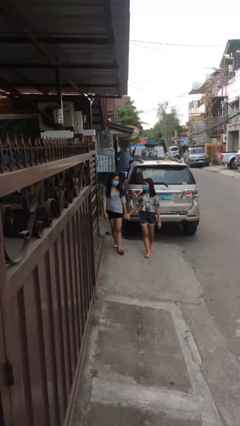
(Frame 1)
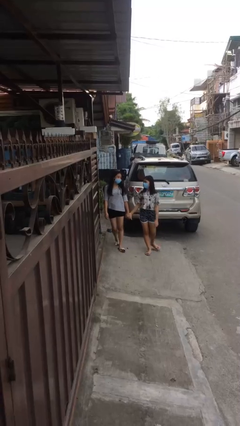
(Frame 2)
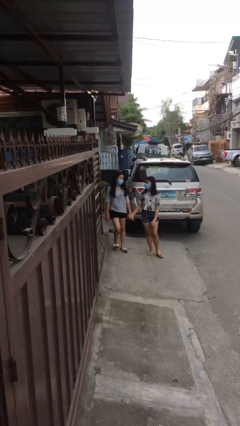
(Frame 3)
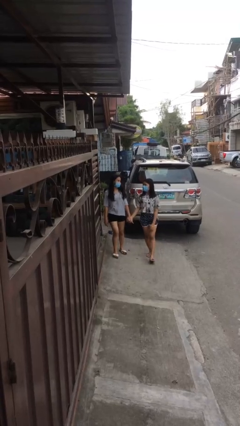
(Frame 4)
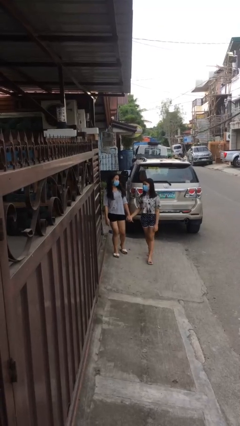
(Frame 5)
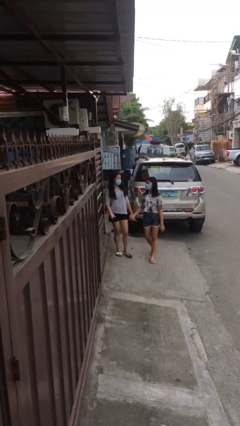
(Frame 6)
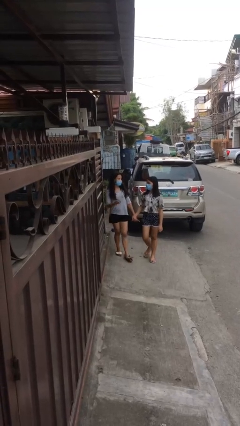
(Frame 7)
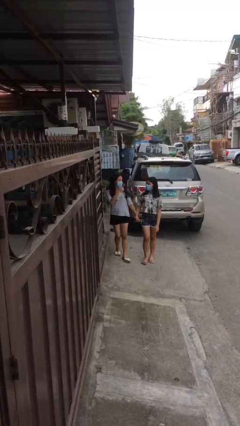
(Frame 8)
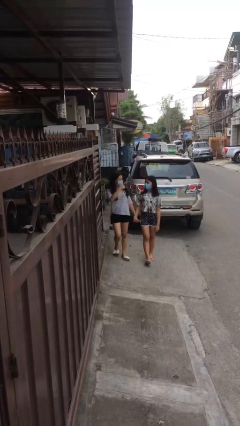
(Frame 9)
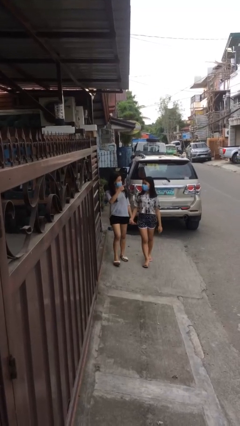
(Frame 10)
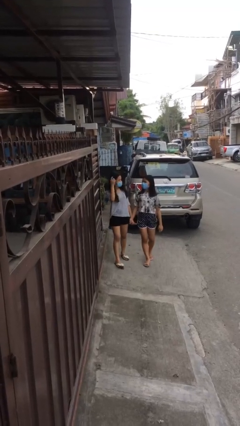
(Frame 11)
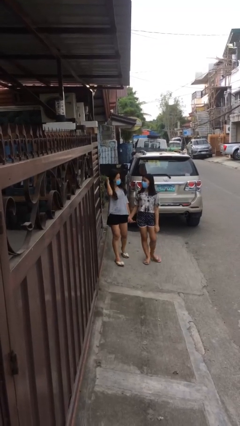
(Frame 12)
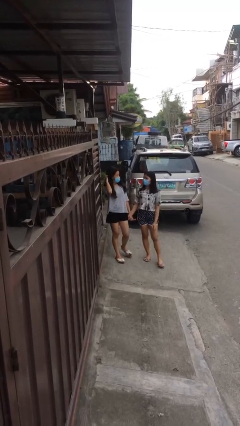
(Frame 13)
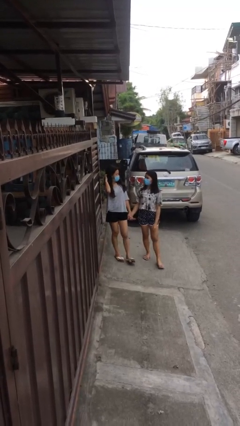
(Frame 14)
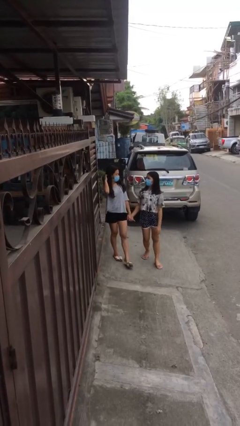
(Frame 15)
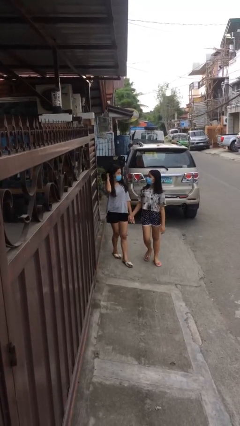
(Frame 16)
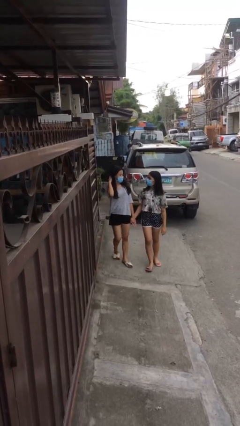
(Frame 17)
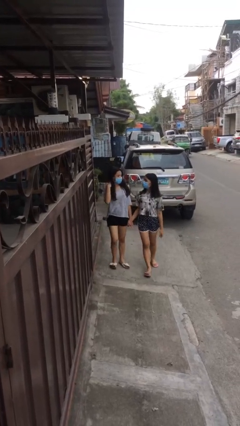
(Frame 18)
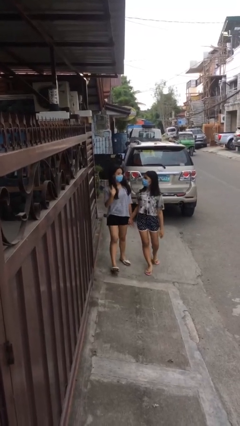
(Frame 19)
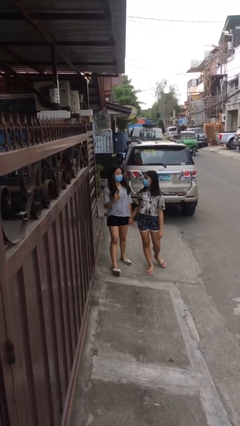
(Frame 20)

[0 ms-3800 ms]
person holds hand

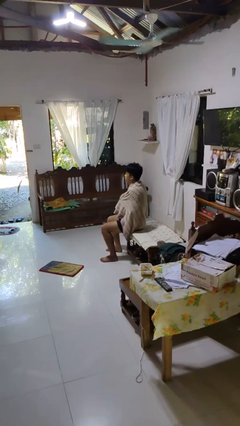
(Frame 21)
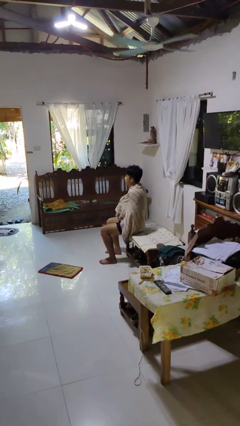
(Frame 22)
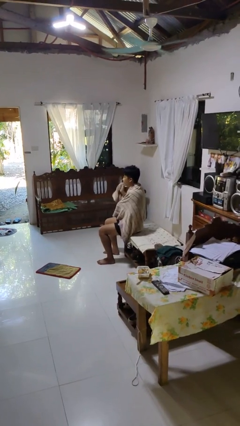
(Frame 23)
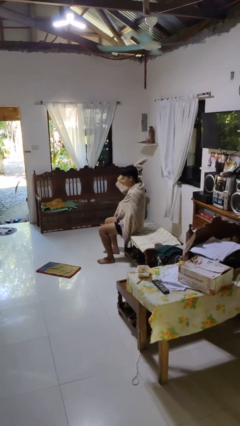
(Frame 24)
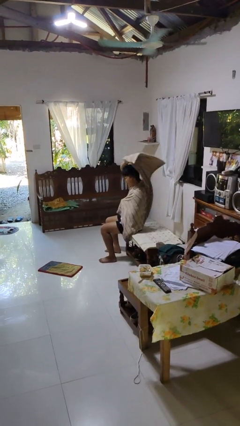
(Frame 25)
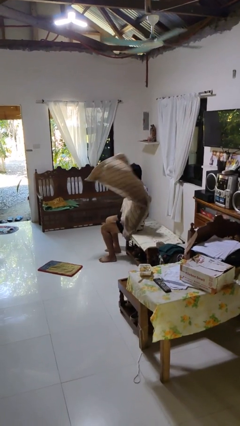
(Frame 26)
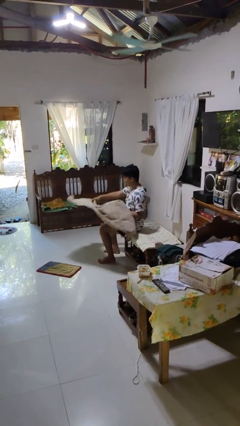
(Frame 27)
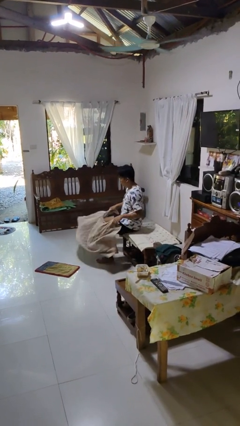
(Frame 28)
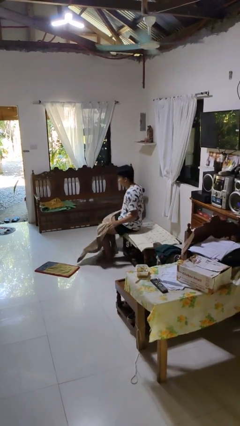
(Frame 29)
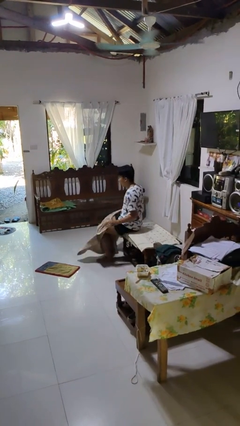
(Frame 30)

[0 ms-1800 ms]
person uncovers with blanket

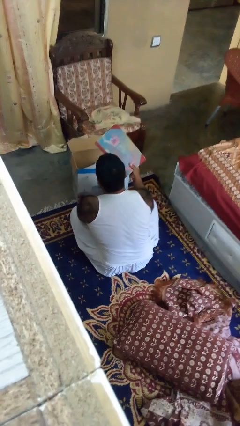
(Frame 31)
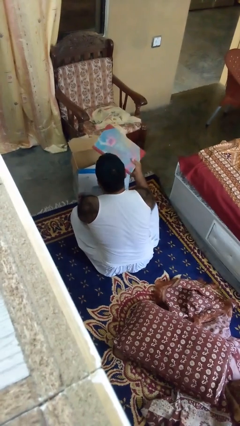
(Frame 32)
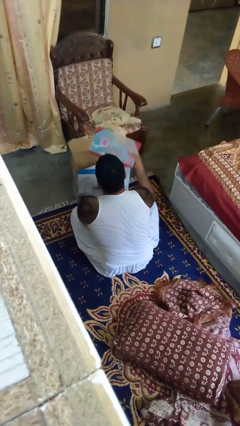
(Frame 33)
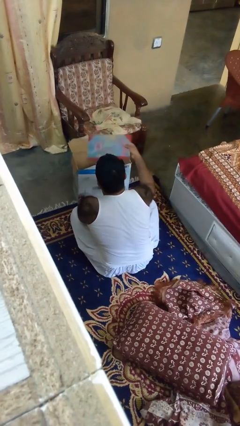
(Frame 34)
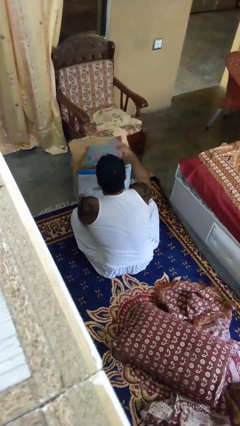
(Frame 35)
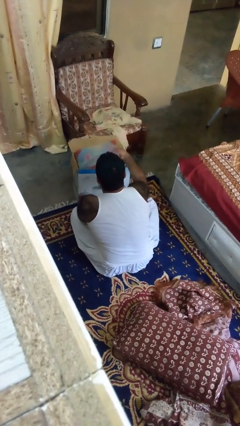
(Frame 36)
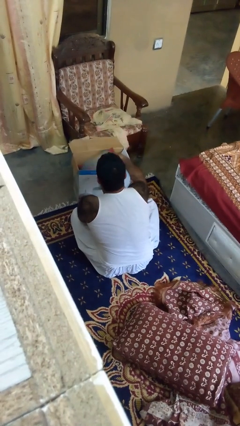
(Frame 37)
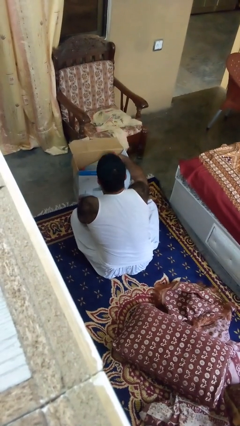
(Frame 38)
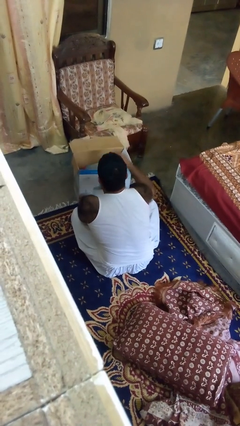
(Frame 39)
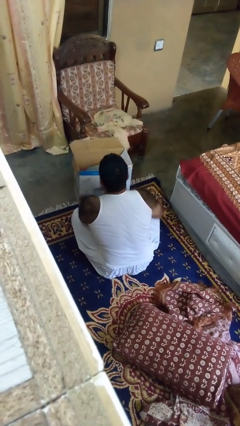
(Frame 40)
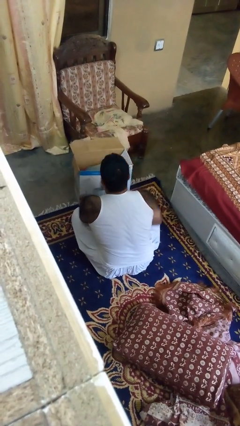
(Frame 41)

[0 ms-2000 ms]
person puts object into box

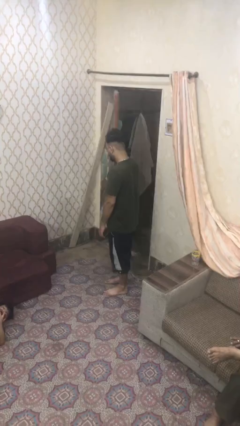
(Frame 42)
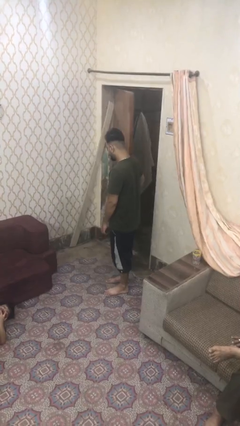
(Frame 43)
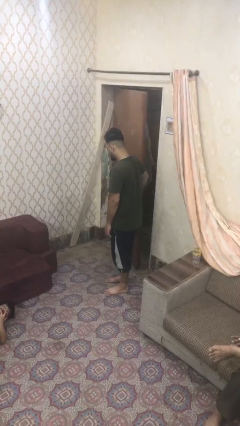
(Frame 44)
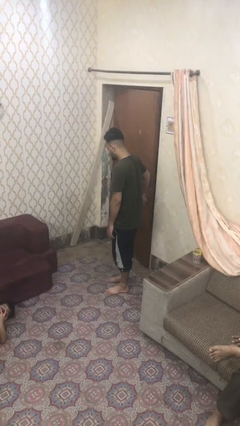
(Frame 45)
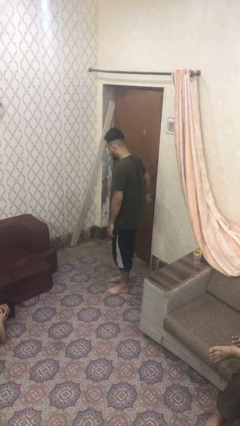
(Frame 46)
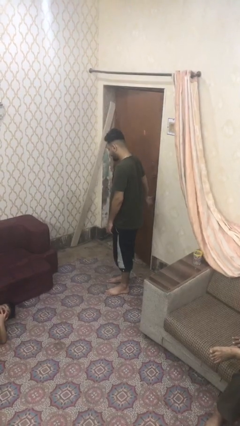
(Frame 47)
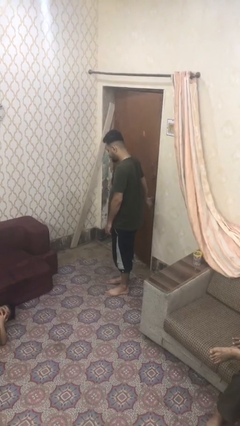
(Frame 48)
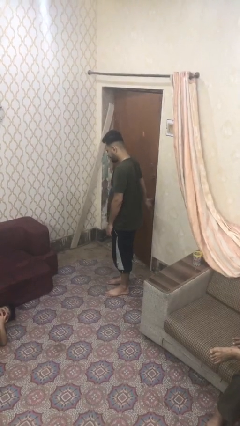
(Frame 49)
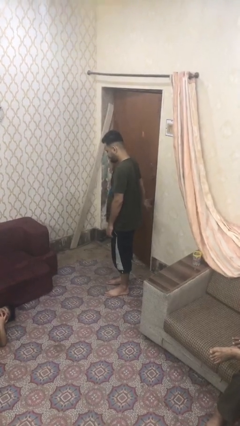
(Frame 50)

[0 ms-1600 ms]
person closes facility door

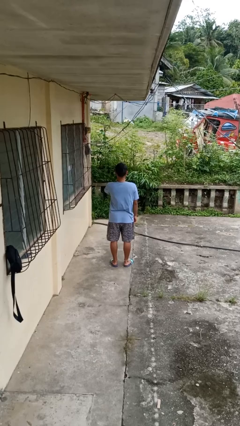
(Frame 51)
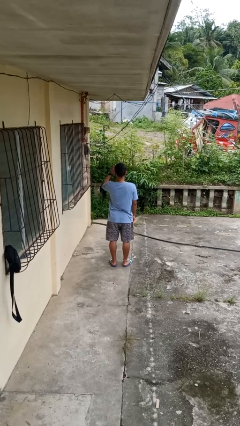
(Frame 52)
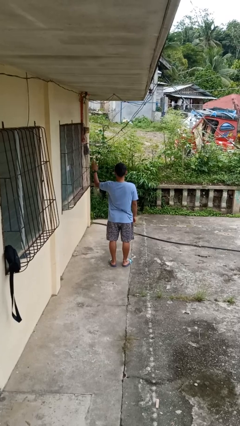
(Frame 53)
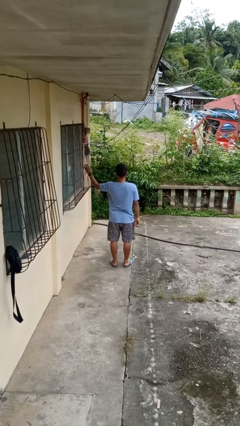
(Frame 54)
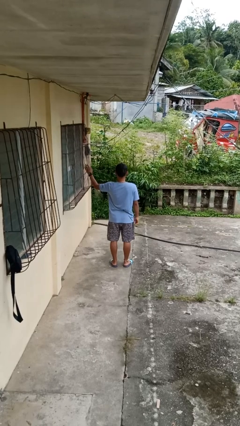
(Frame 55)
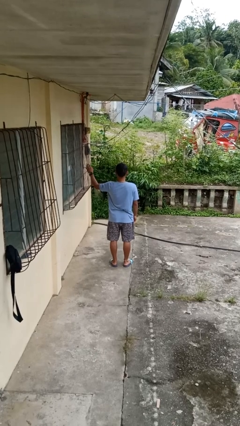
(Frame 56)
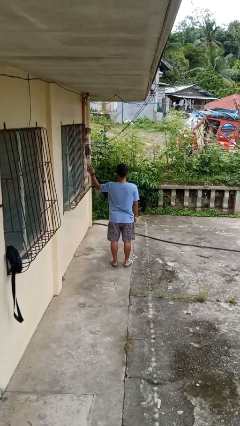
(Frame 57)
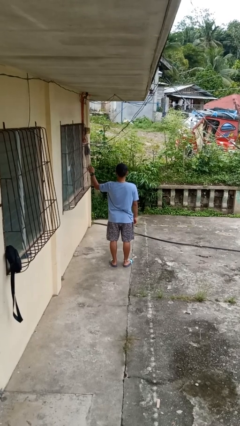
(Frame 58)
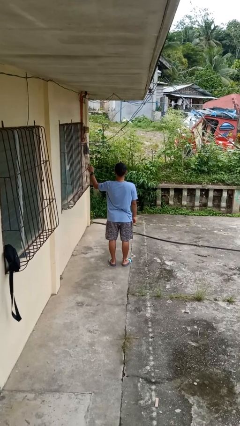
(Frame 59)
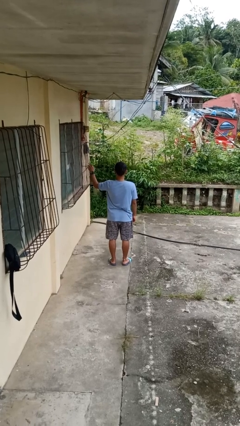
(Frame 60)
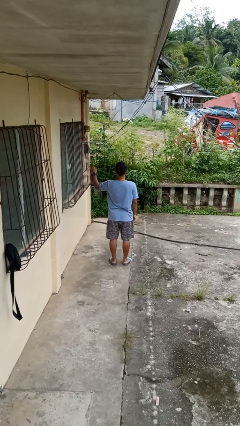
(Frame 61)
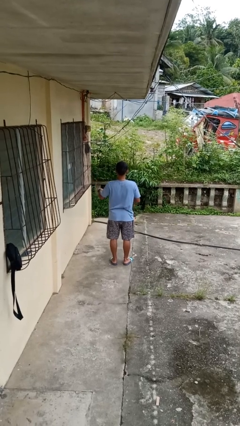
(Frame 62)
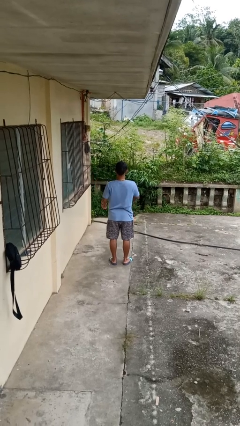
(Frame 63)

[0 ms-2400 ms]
person gestures swipe left

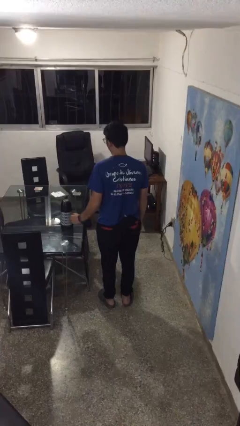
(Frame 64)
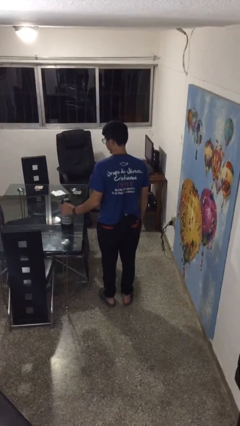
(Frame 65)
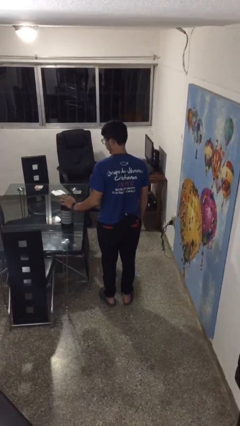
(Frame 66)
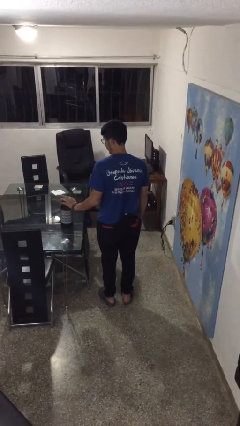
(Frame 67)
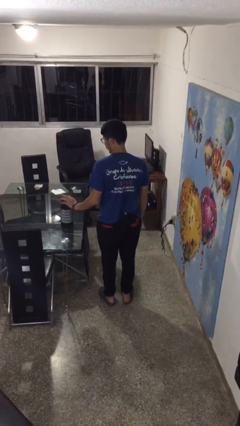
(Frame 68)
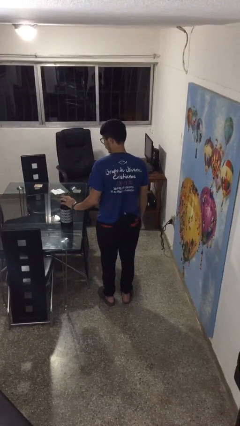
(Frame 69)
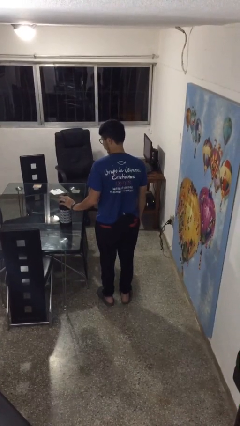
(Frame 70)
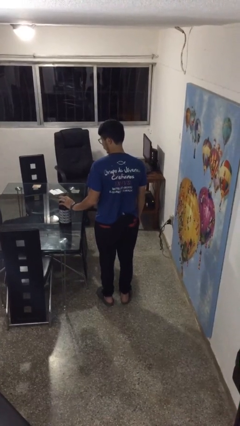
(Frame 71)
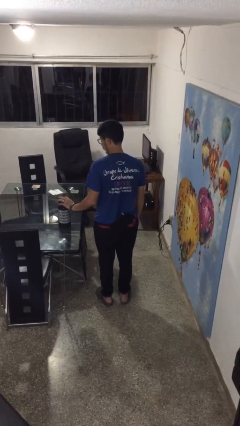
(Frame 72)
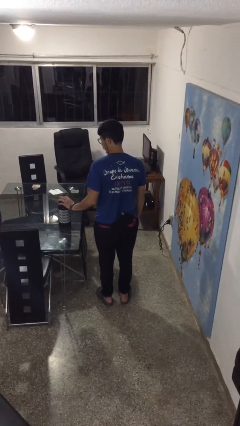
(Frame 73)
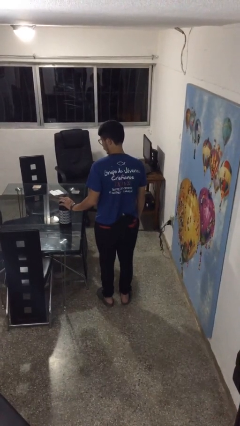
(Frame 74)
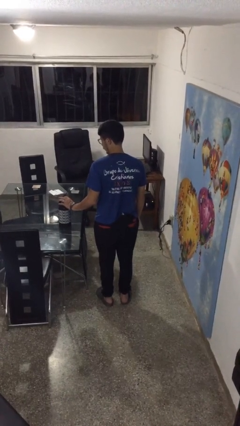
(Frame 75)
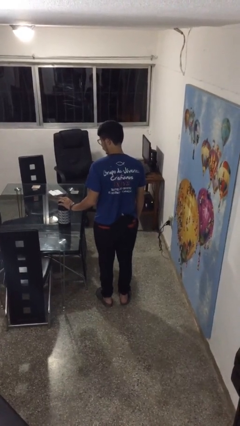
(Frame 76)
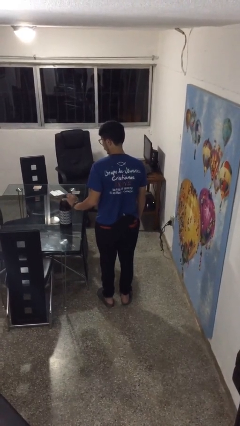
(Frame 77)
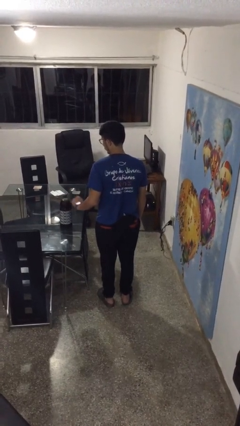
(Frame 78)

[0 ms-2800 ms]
person taps object with finger

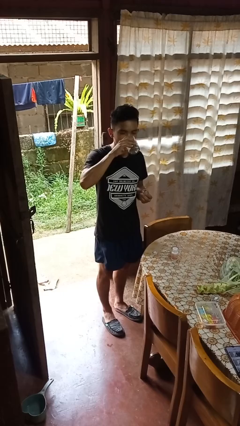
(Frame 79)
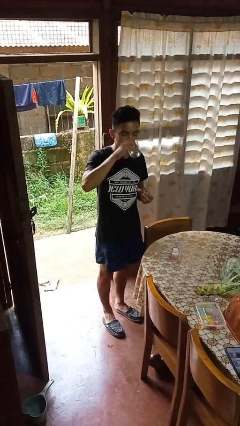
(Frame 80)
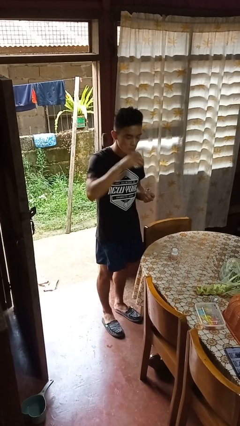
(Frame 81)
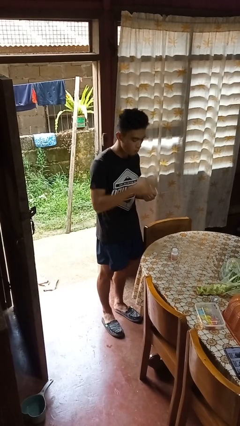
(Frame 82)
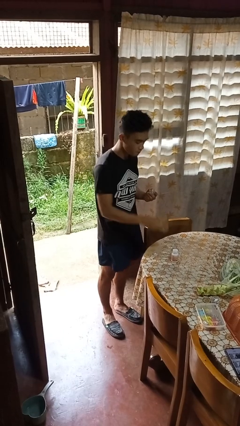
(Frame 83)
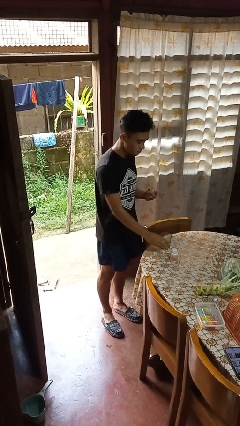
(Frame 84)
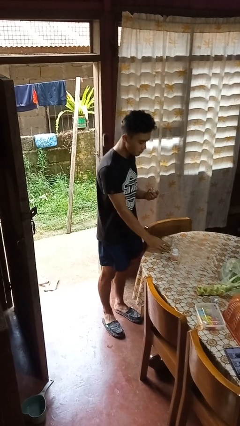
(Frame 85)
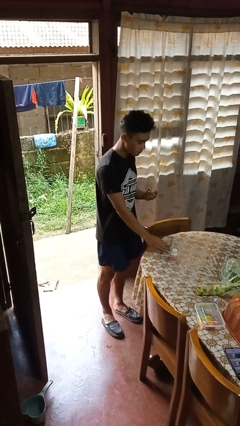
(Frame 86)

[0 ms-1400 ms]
person drinks from cup

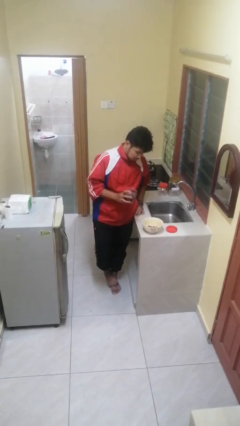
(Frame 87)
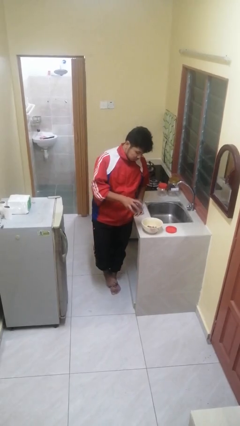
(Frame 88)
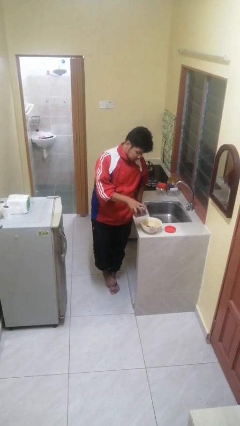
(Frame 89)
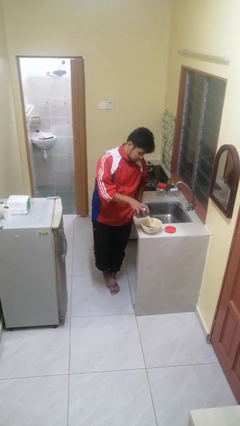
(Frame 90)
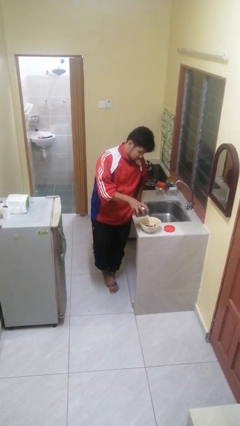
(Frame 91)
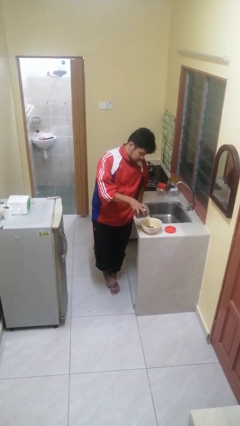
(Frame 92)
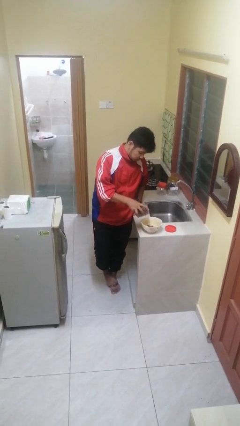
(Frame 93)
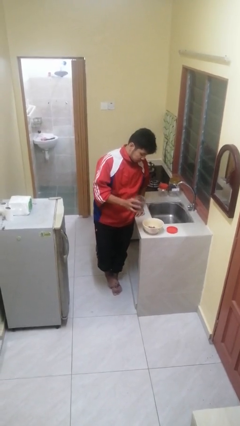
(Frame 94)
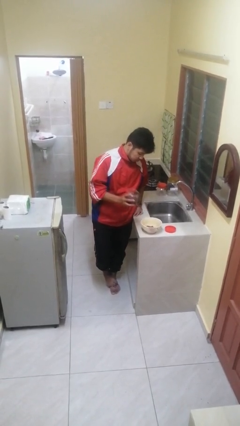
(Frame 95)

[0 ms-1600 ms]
person pours into bowl
